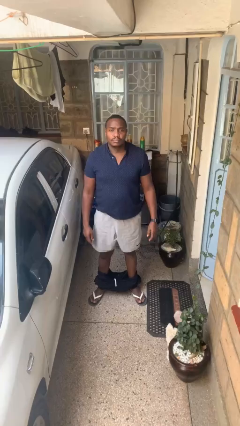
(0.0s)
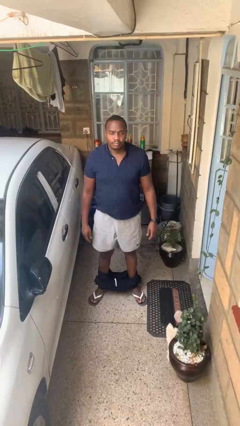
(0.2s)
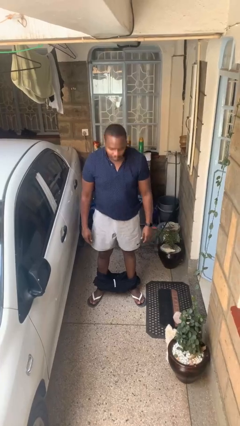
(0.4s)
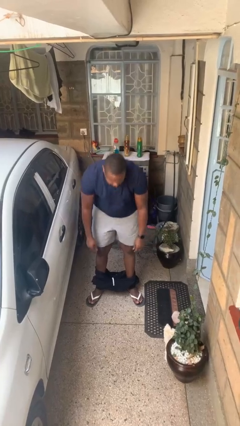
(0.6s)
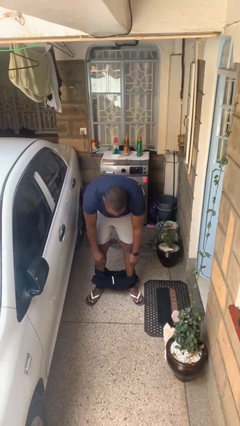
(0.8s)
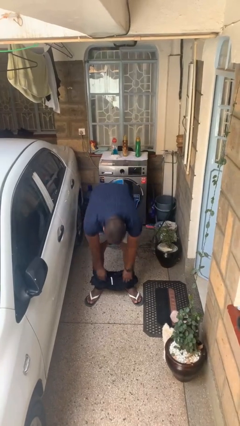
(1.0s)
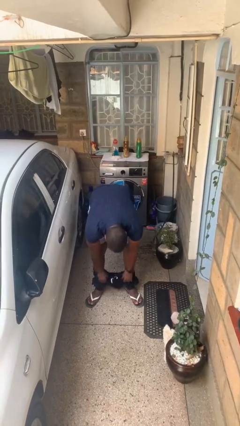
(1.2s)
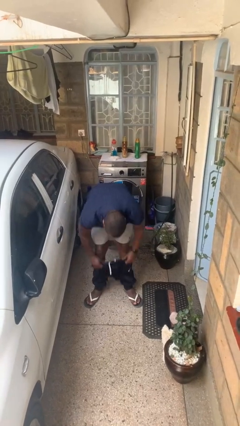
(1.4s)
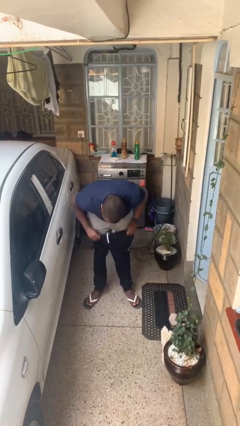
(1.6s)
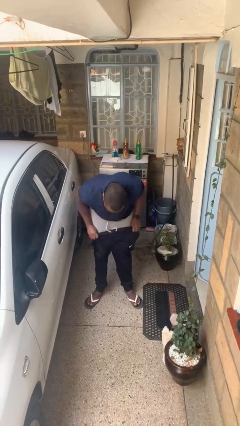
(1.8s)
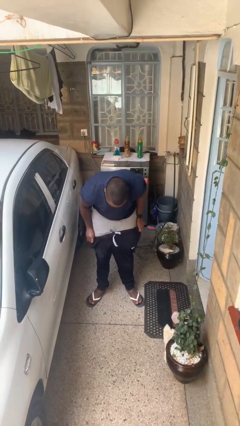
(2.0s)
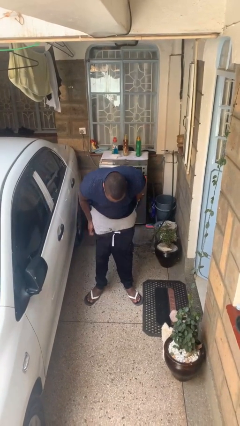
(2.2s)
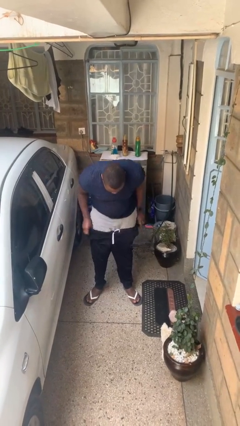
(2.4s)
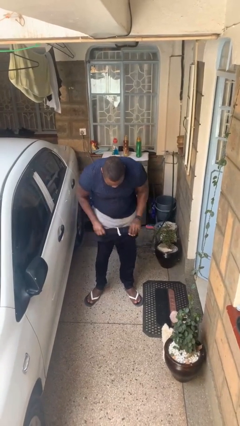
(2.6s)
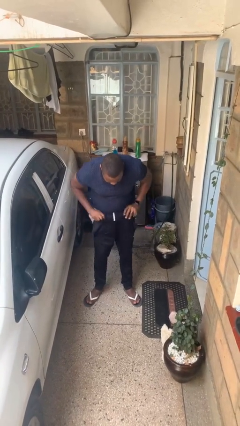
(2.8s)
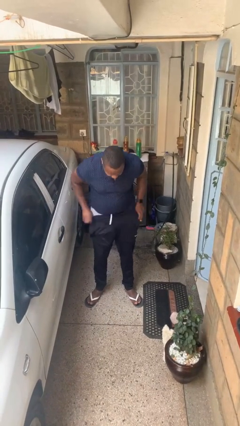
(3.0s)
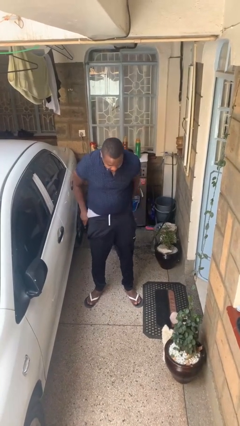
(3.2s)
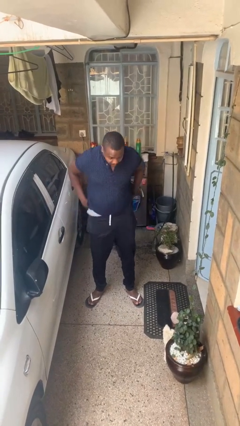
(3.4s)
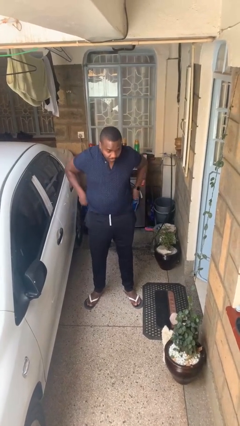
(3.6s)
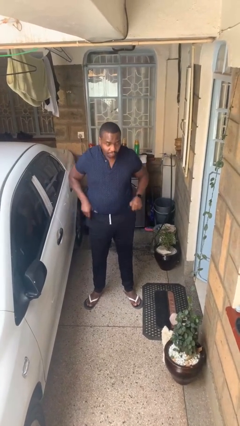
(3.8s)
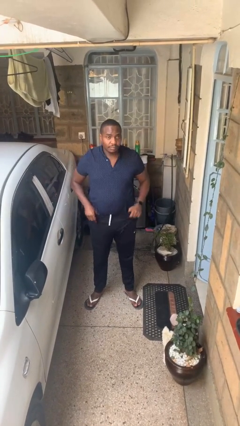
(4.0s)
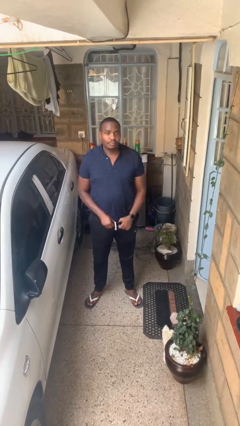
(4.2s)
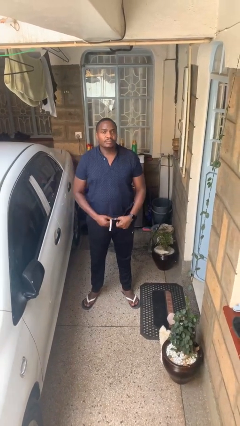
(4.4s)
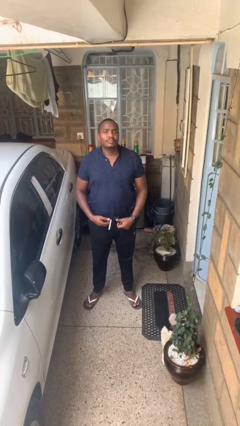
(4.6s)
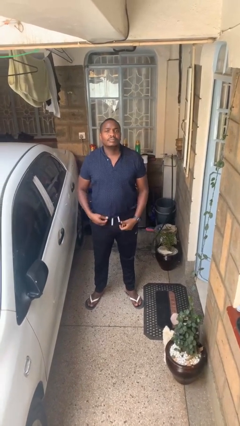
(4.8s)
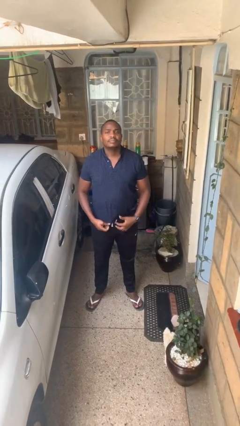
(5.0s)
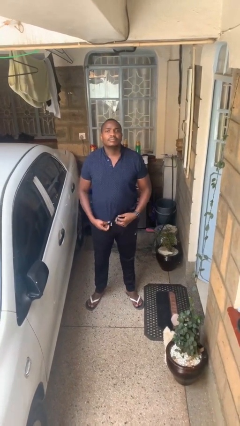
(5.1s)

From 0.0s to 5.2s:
person puts on pants

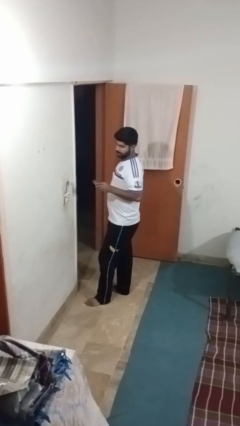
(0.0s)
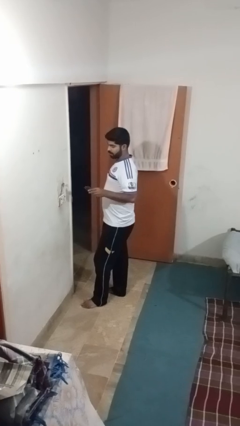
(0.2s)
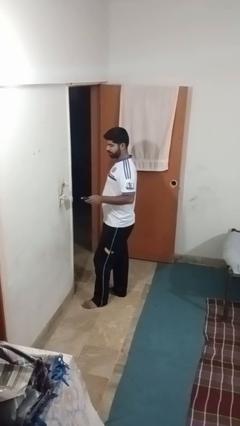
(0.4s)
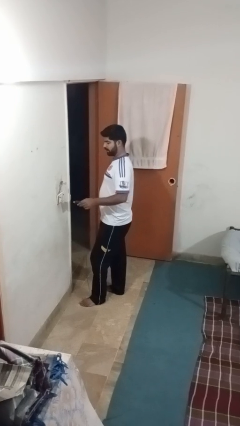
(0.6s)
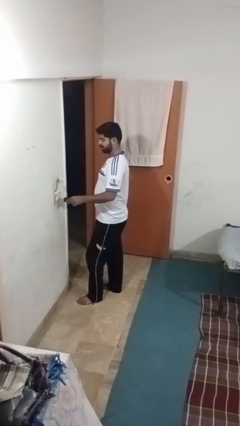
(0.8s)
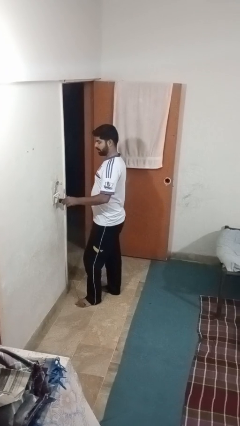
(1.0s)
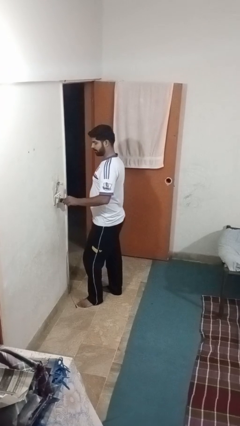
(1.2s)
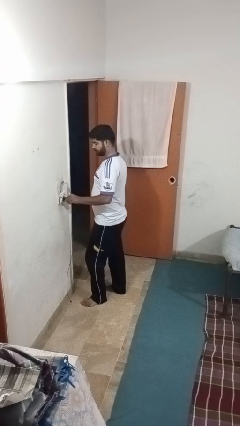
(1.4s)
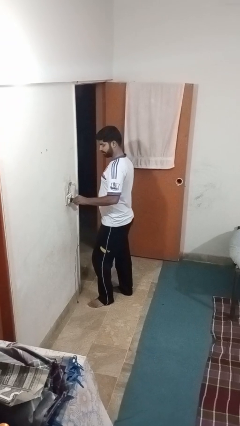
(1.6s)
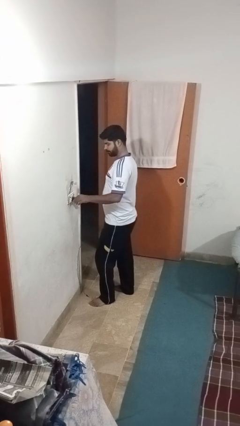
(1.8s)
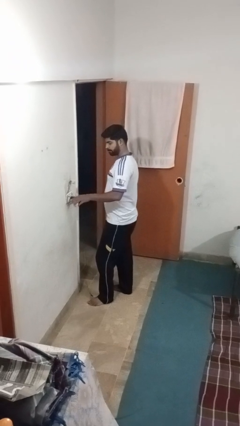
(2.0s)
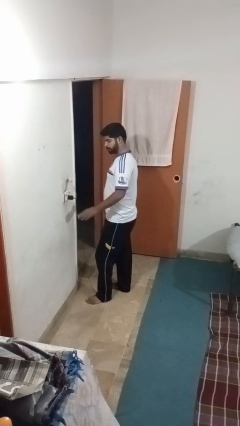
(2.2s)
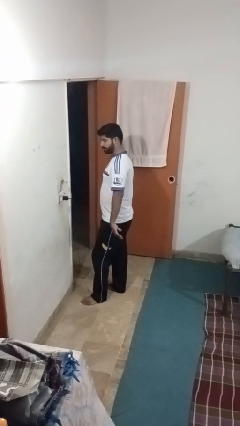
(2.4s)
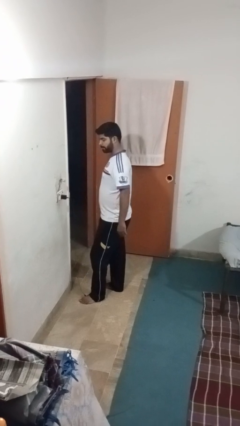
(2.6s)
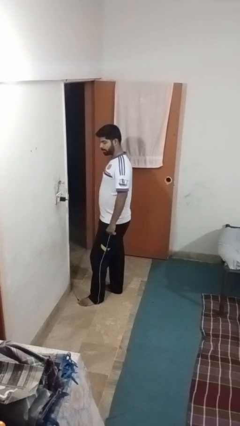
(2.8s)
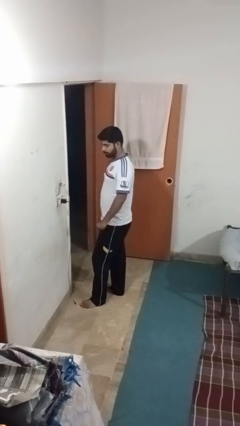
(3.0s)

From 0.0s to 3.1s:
person plugs into electrical socket

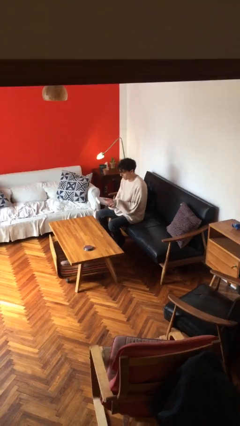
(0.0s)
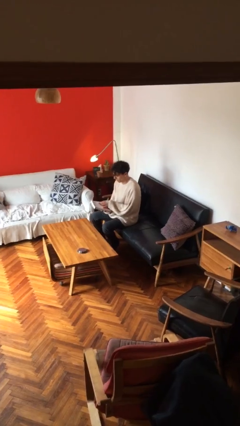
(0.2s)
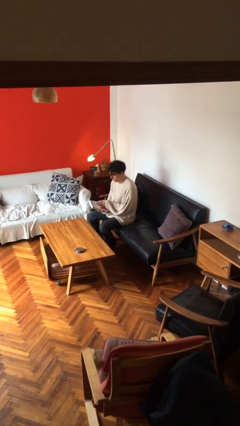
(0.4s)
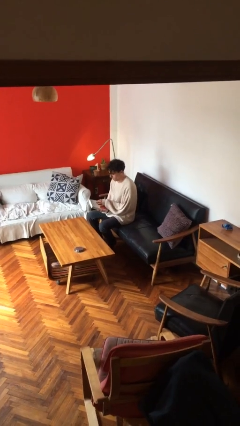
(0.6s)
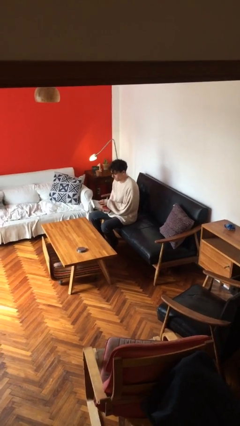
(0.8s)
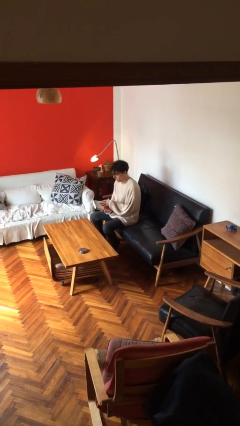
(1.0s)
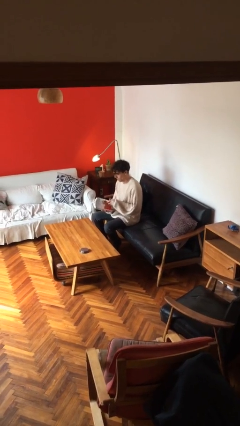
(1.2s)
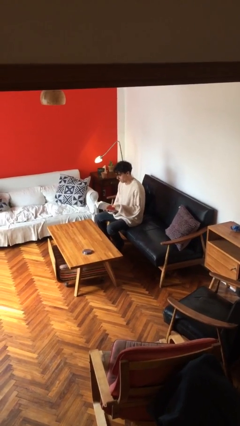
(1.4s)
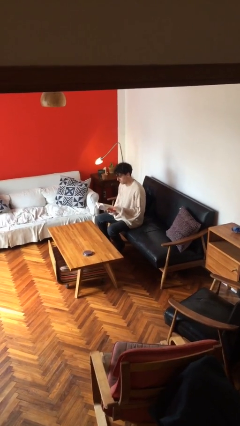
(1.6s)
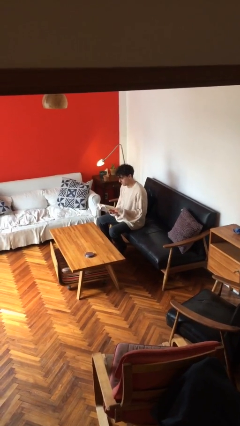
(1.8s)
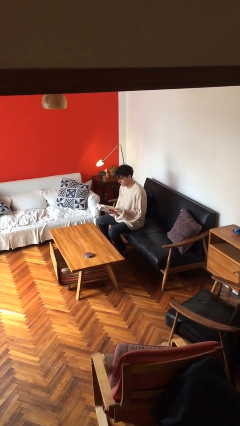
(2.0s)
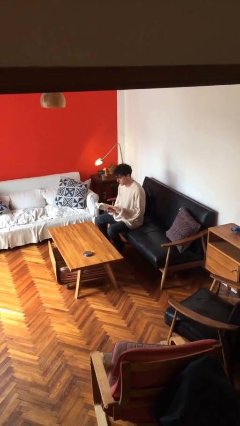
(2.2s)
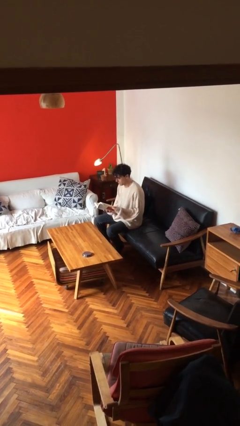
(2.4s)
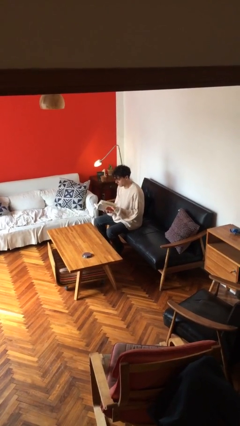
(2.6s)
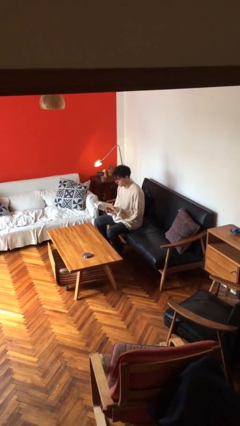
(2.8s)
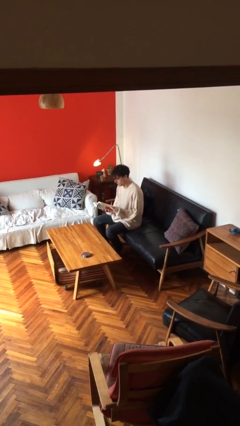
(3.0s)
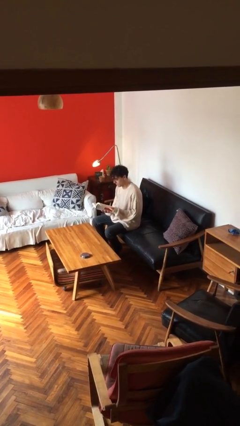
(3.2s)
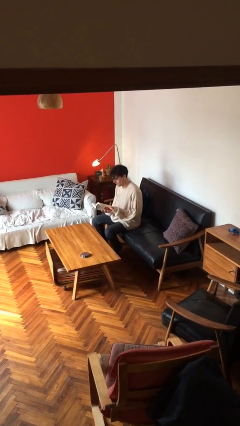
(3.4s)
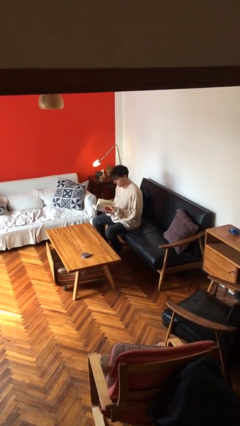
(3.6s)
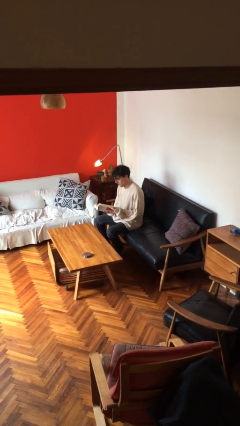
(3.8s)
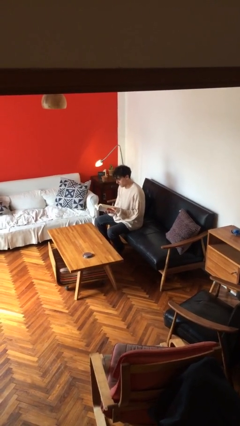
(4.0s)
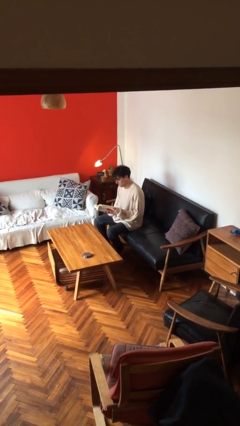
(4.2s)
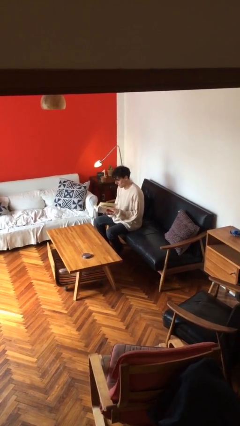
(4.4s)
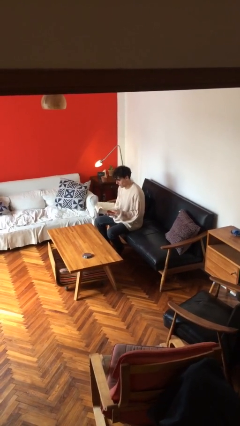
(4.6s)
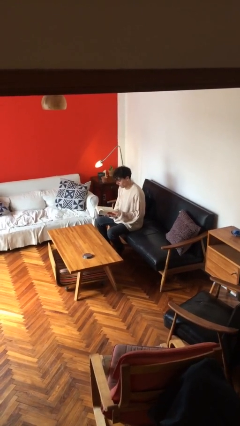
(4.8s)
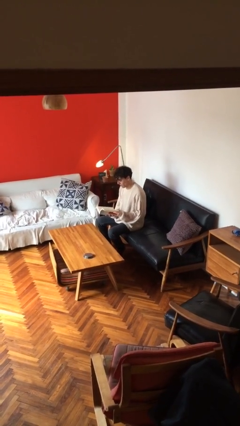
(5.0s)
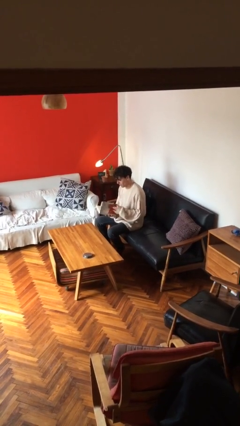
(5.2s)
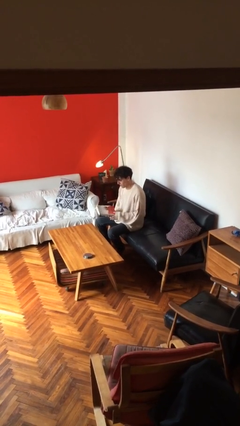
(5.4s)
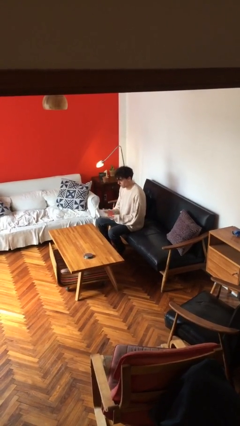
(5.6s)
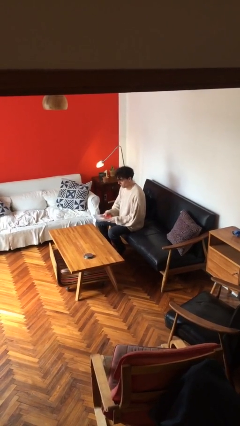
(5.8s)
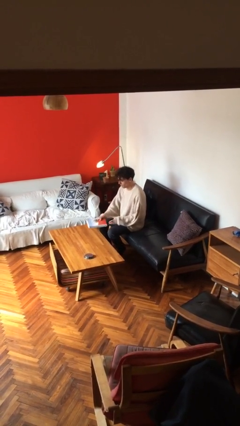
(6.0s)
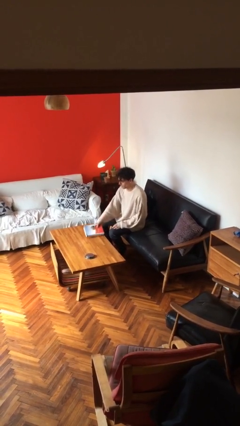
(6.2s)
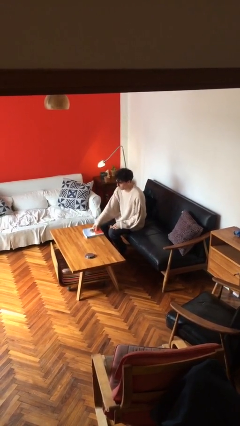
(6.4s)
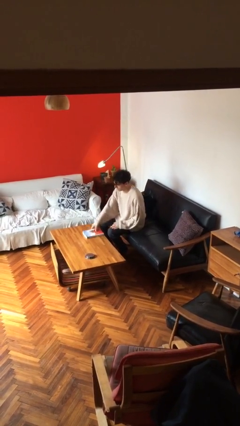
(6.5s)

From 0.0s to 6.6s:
person reads document

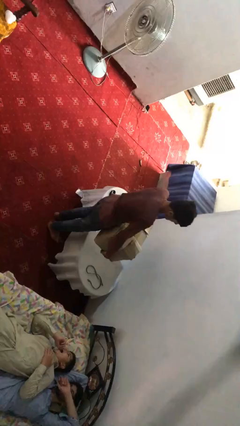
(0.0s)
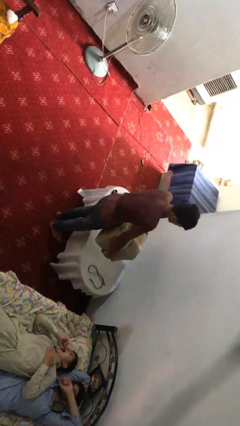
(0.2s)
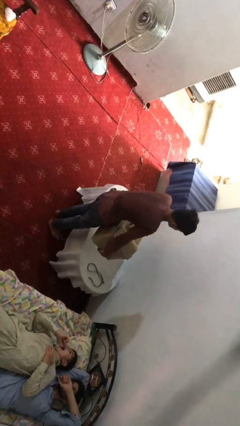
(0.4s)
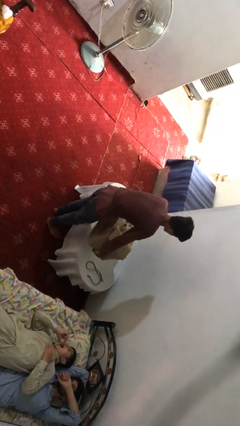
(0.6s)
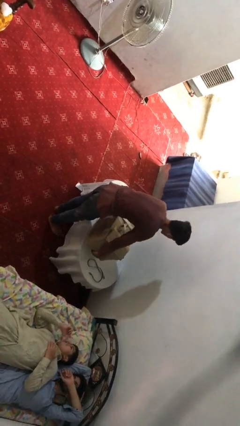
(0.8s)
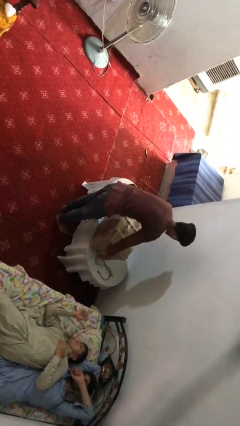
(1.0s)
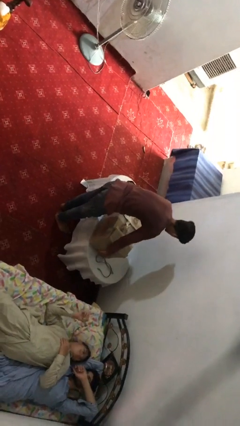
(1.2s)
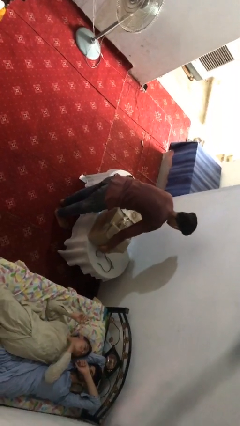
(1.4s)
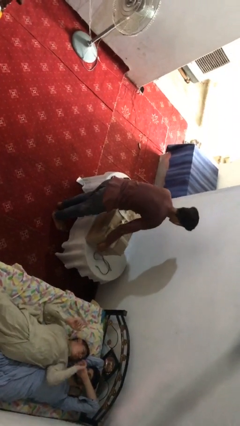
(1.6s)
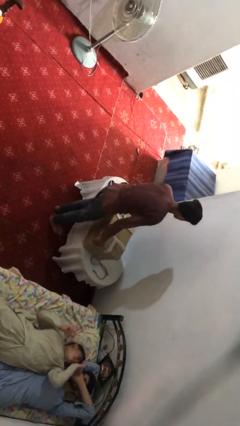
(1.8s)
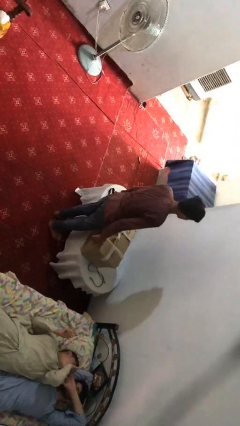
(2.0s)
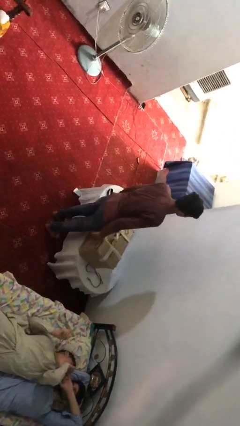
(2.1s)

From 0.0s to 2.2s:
person puts down object on table

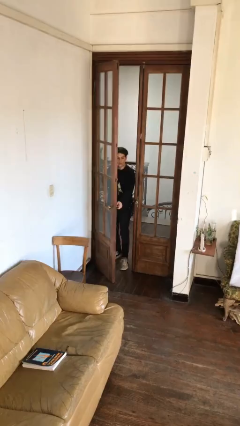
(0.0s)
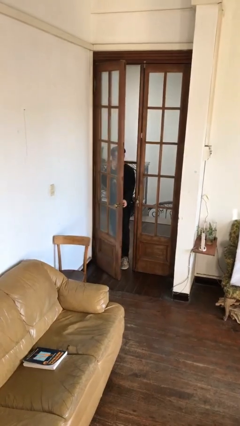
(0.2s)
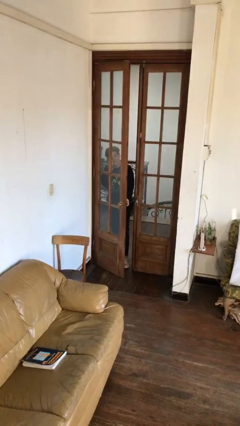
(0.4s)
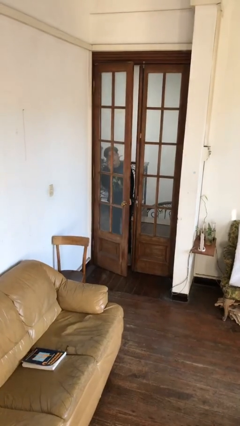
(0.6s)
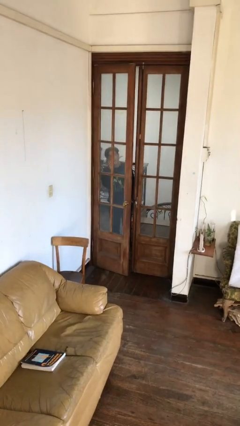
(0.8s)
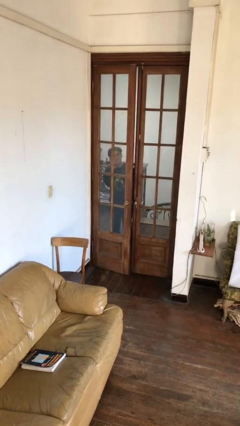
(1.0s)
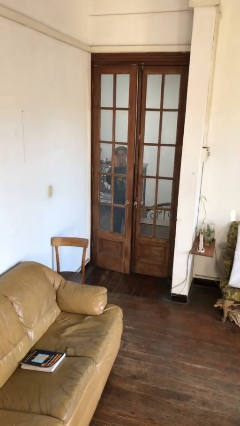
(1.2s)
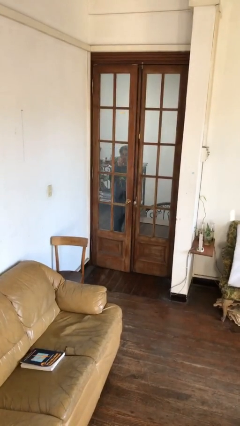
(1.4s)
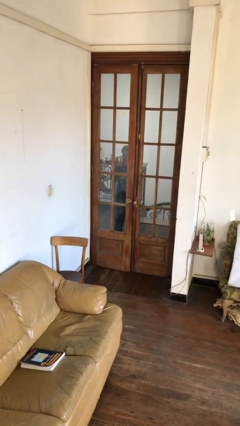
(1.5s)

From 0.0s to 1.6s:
person closes facility door
